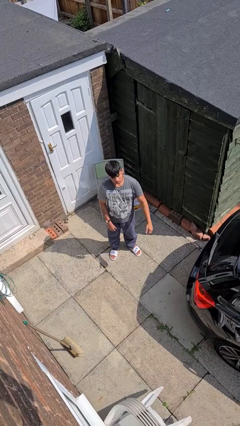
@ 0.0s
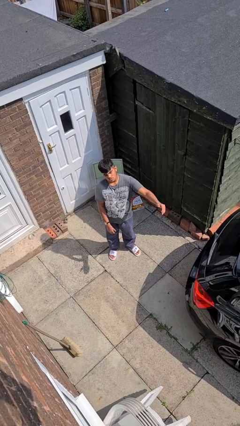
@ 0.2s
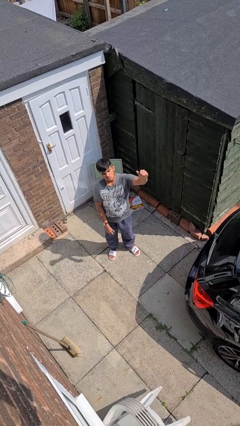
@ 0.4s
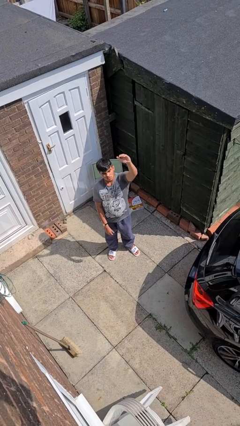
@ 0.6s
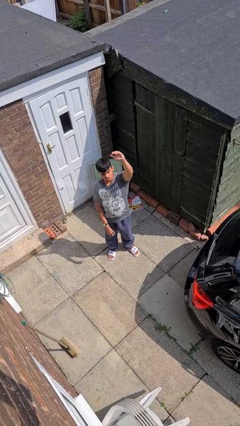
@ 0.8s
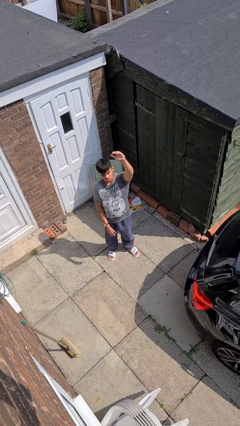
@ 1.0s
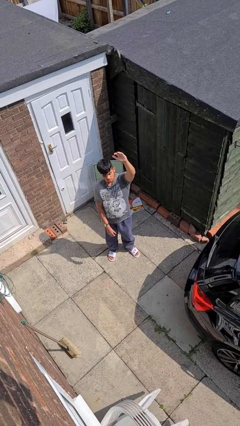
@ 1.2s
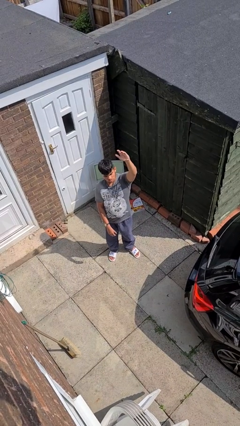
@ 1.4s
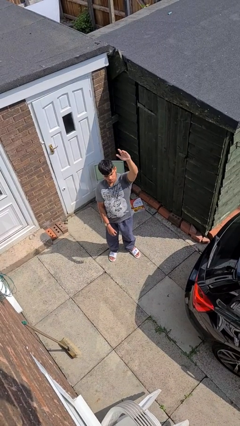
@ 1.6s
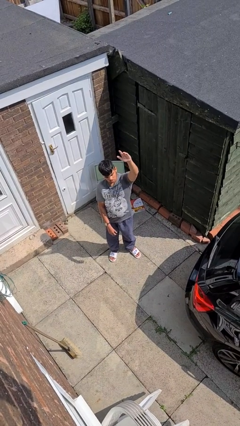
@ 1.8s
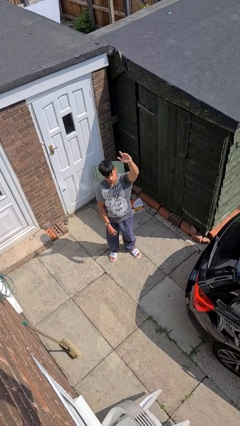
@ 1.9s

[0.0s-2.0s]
person gestures raise hand

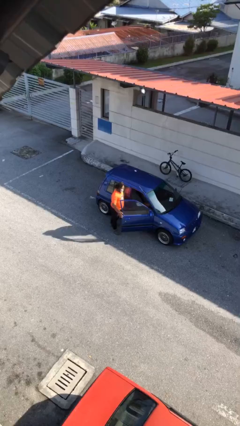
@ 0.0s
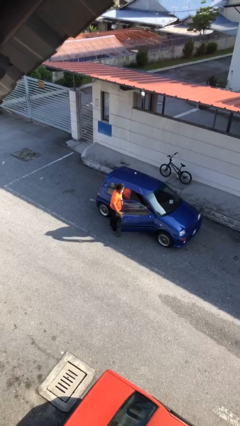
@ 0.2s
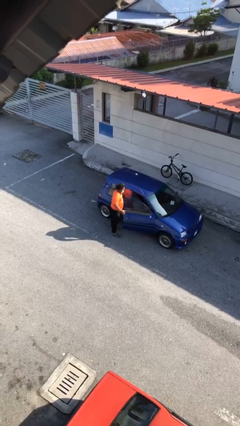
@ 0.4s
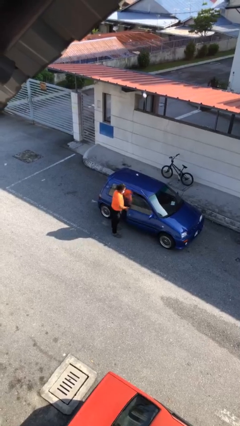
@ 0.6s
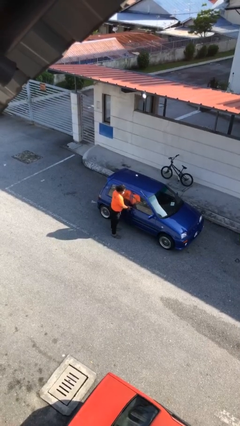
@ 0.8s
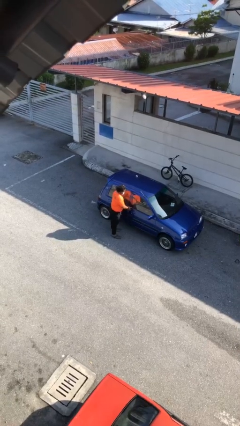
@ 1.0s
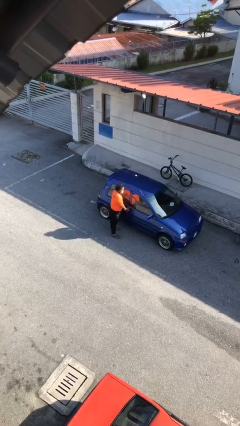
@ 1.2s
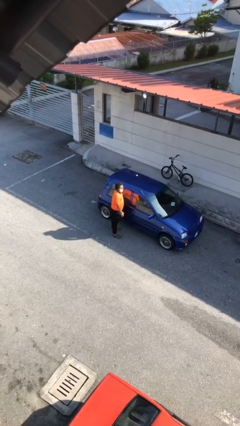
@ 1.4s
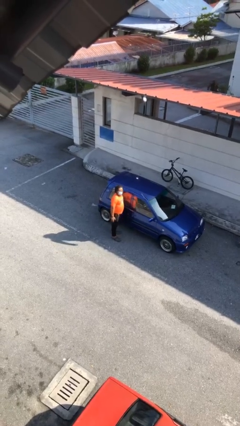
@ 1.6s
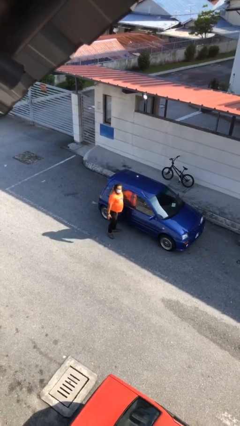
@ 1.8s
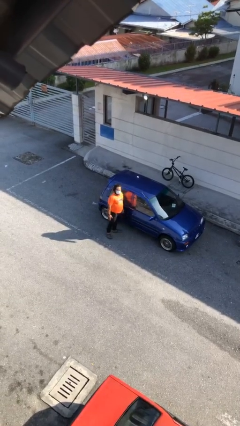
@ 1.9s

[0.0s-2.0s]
person closes car door

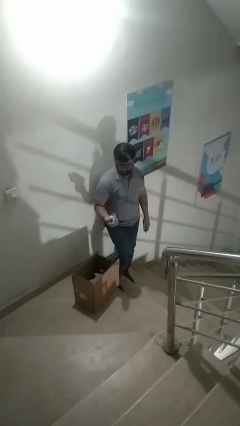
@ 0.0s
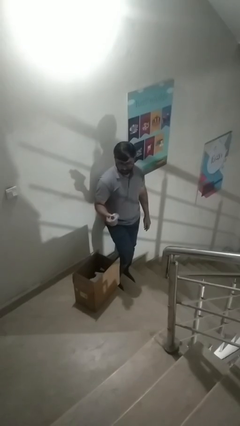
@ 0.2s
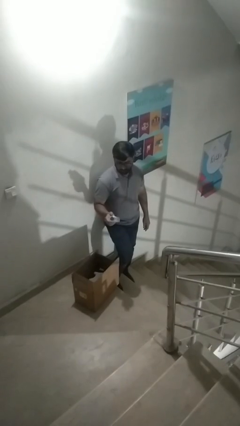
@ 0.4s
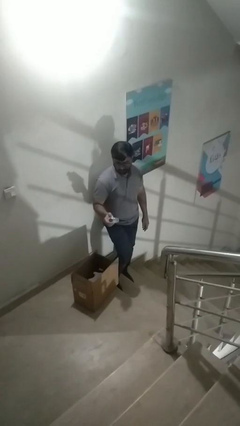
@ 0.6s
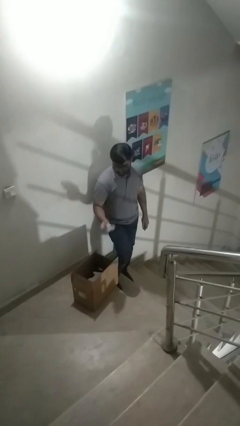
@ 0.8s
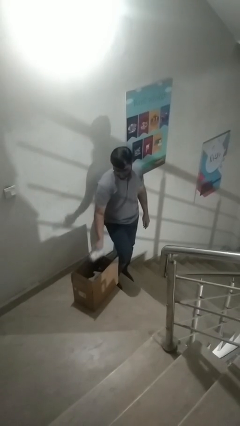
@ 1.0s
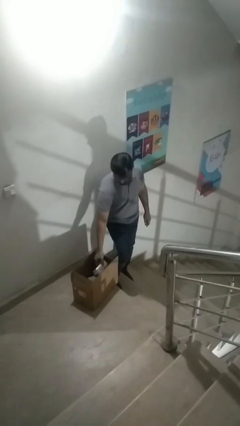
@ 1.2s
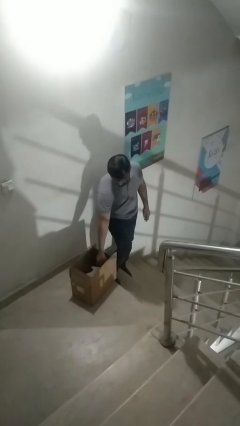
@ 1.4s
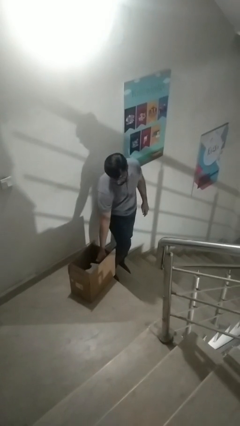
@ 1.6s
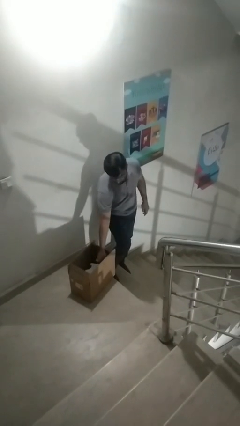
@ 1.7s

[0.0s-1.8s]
person puts object into box

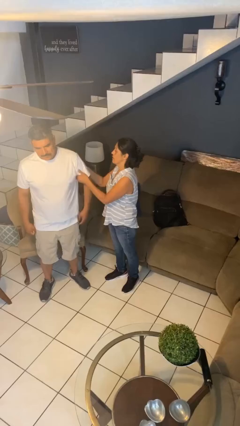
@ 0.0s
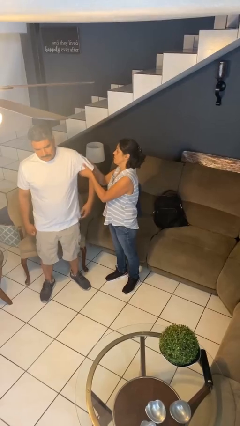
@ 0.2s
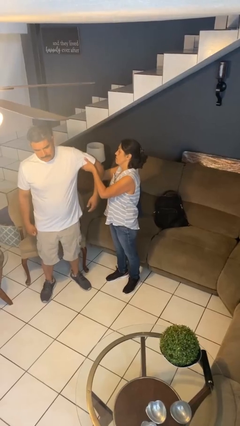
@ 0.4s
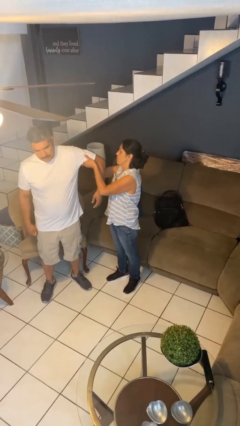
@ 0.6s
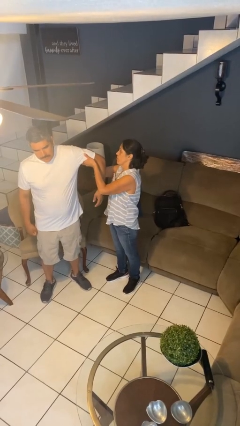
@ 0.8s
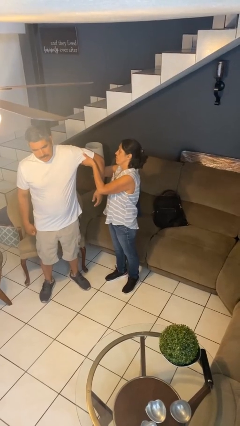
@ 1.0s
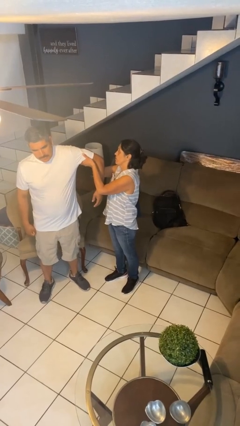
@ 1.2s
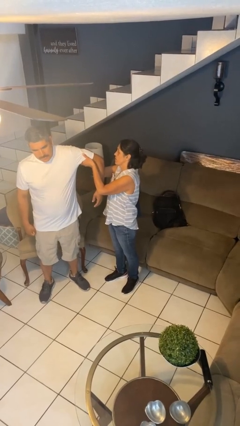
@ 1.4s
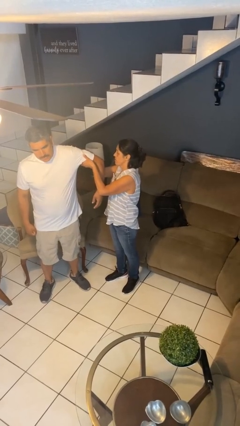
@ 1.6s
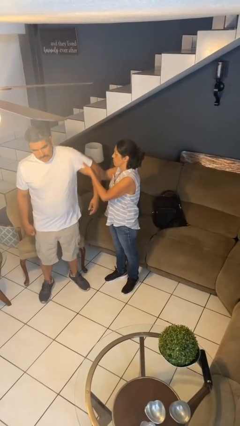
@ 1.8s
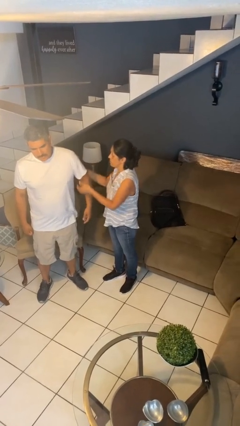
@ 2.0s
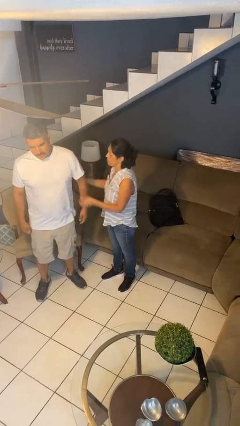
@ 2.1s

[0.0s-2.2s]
person grabs person by bicep

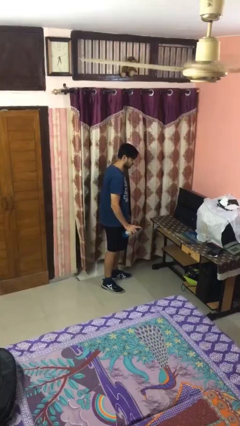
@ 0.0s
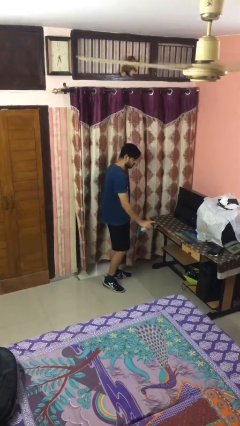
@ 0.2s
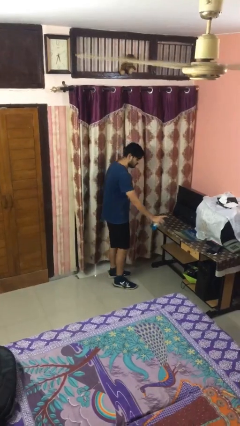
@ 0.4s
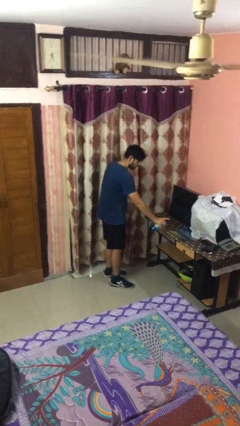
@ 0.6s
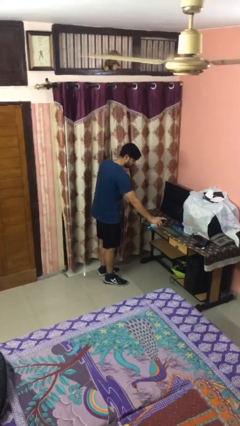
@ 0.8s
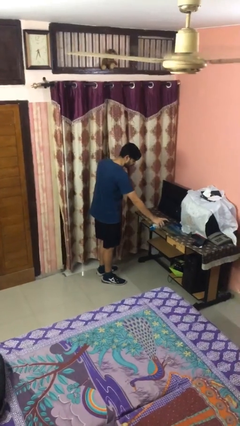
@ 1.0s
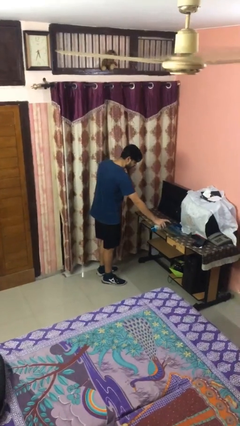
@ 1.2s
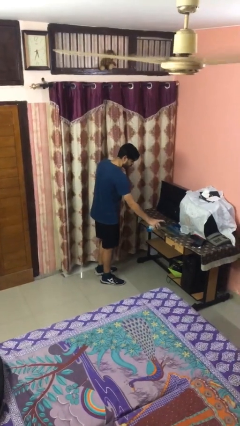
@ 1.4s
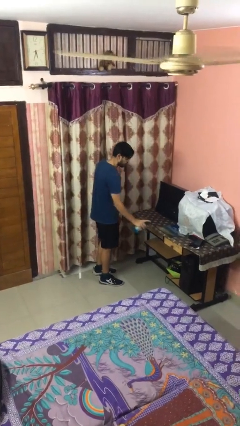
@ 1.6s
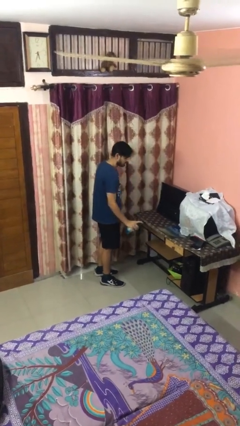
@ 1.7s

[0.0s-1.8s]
person sprays from bottle

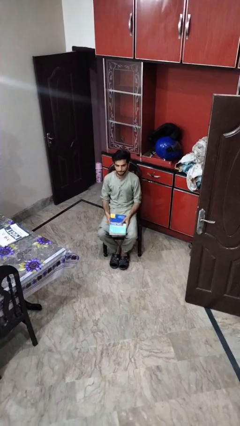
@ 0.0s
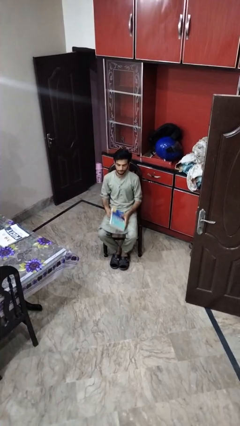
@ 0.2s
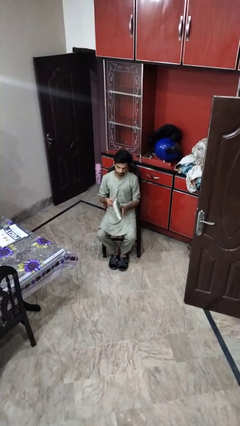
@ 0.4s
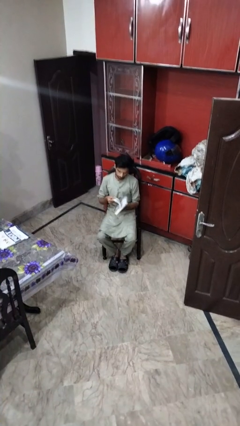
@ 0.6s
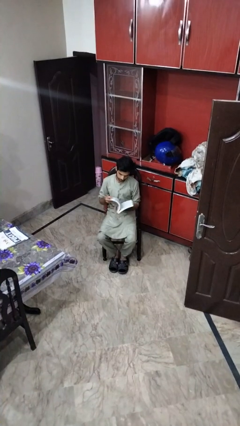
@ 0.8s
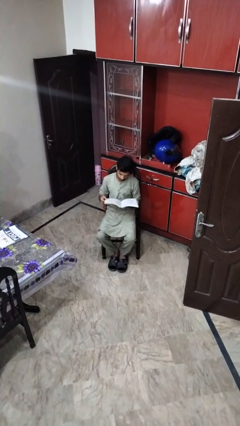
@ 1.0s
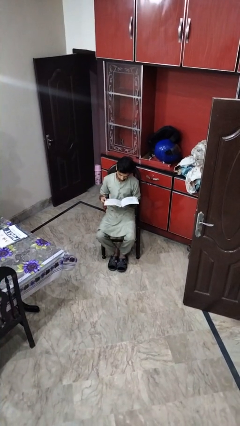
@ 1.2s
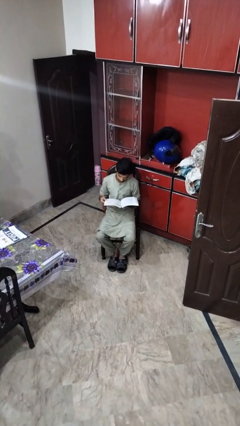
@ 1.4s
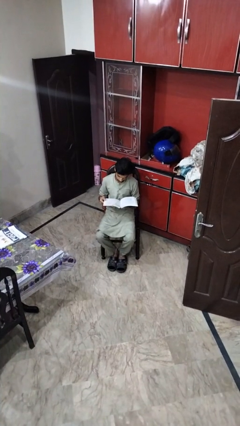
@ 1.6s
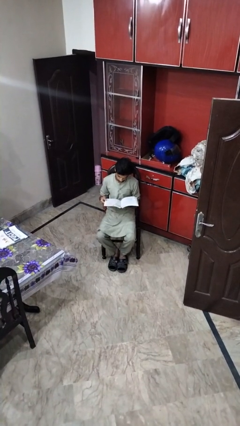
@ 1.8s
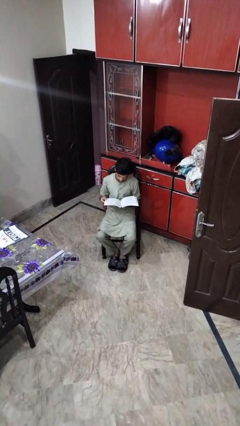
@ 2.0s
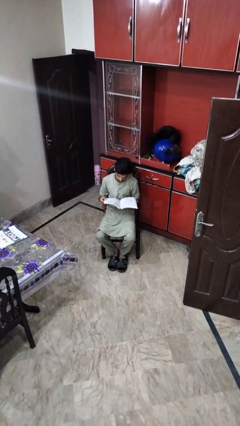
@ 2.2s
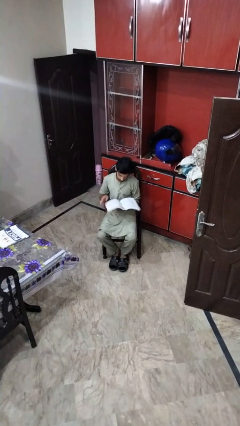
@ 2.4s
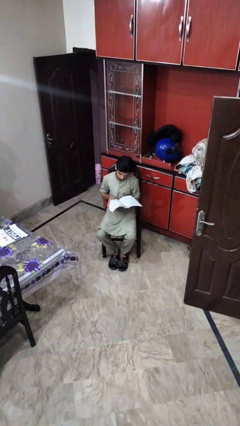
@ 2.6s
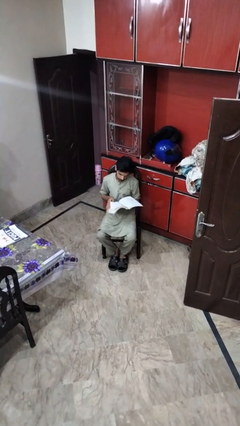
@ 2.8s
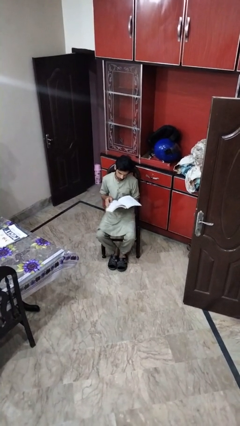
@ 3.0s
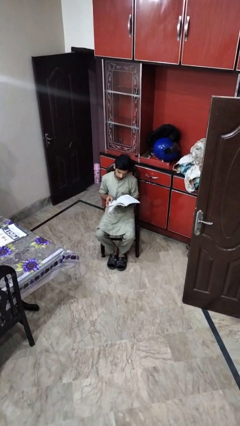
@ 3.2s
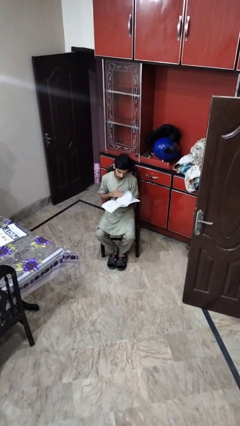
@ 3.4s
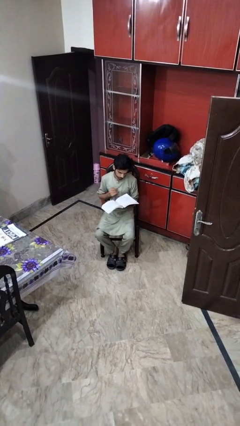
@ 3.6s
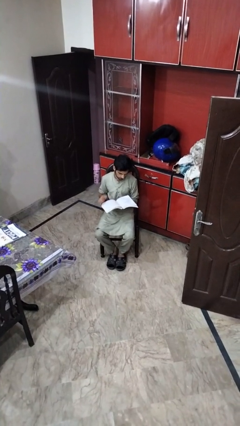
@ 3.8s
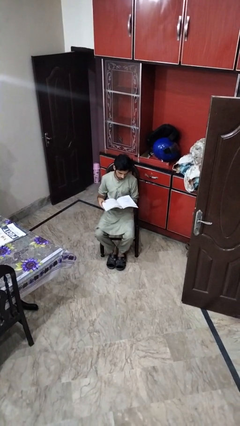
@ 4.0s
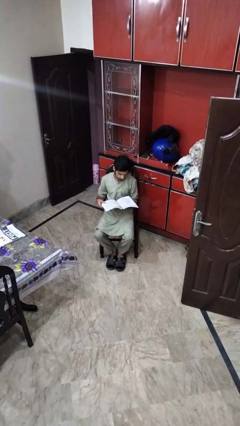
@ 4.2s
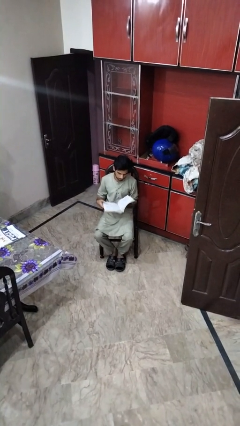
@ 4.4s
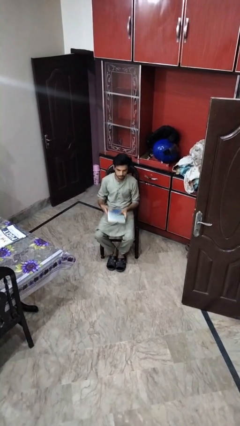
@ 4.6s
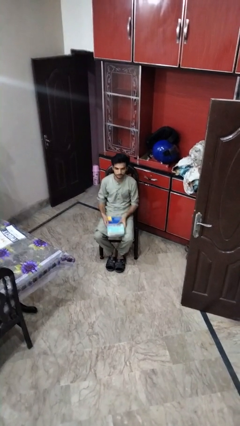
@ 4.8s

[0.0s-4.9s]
person reads book

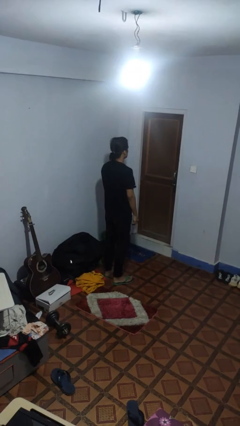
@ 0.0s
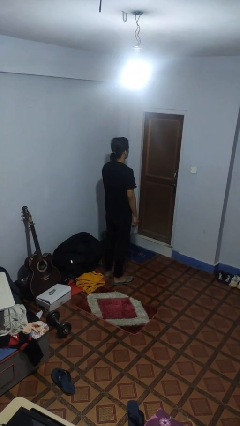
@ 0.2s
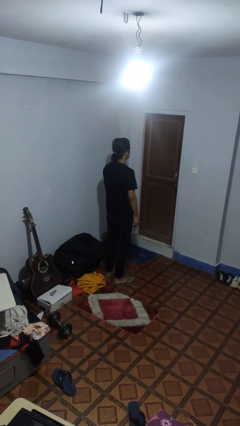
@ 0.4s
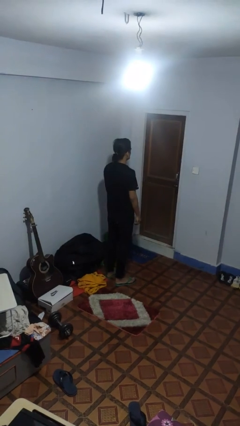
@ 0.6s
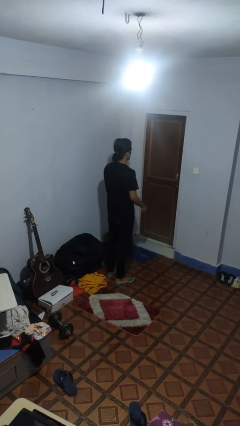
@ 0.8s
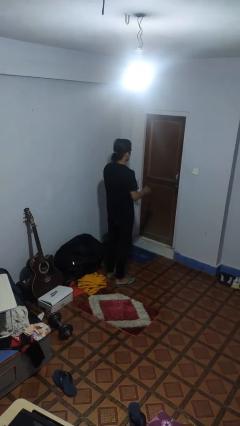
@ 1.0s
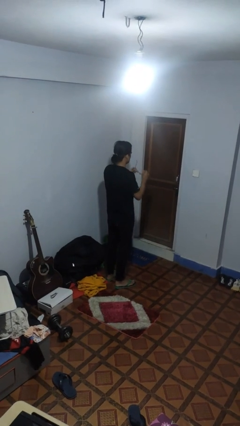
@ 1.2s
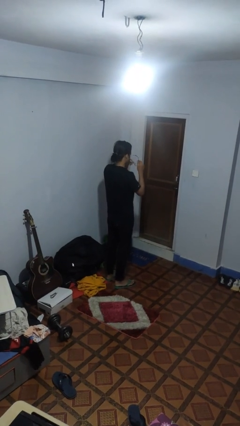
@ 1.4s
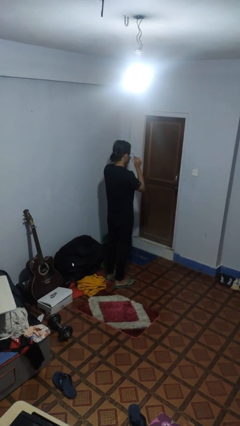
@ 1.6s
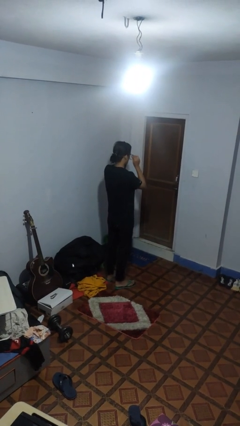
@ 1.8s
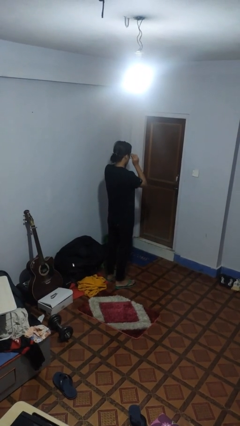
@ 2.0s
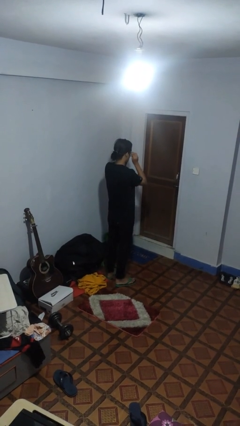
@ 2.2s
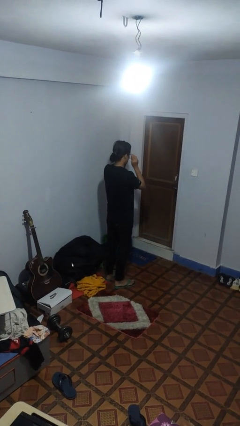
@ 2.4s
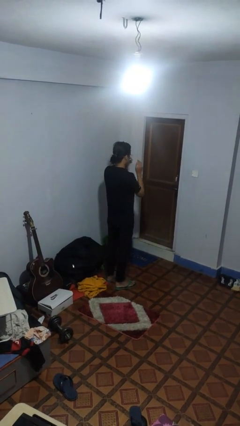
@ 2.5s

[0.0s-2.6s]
person puts on glasses
